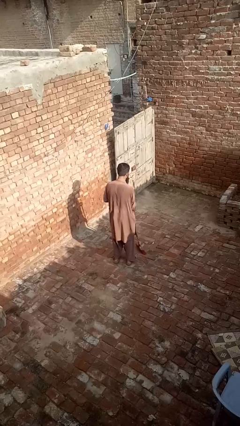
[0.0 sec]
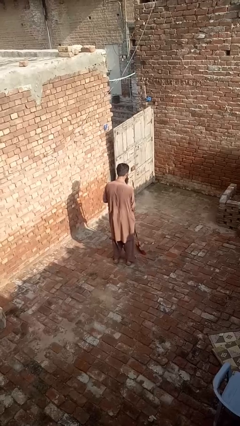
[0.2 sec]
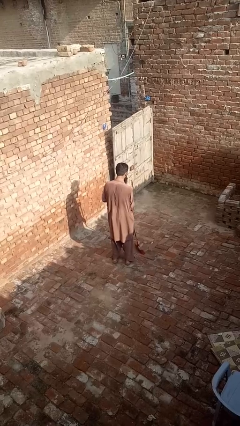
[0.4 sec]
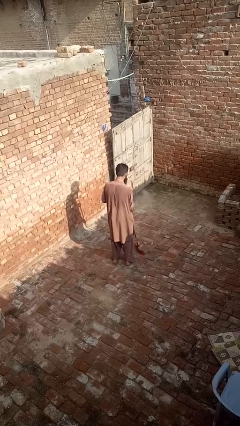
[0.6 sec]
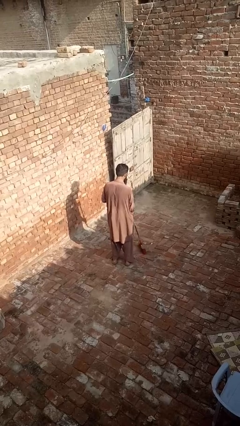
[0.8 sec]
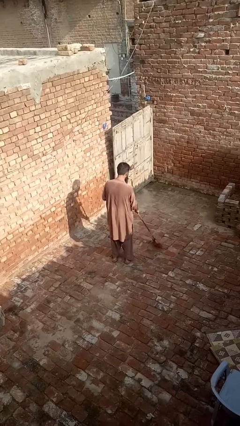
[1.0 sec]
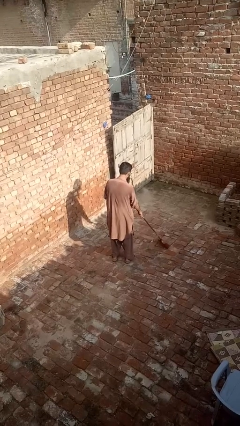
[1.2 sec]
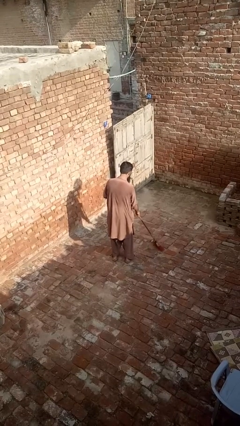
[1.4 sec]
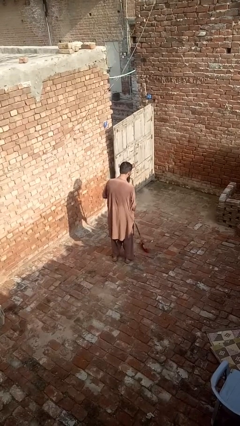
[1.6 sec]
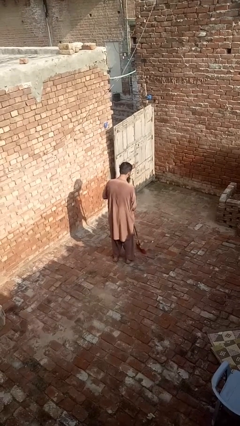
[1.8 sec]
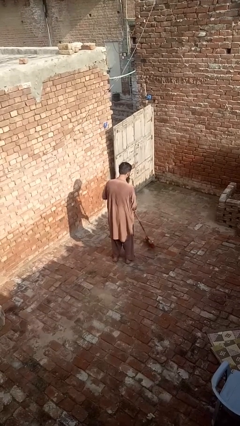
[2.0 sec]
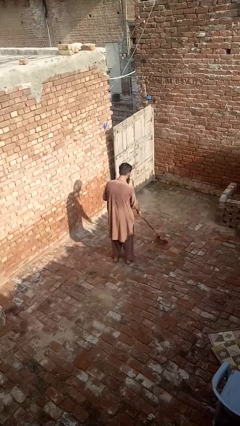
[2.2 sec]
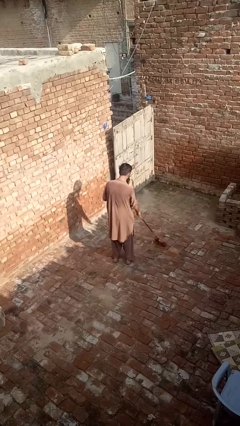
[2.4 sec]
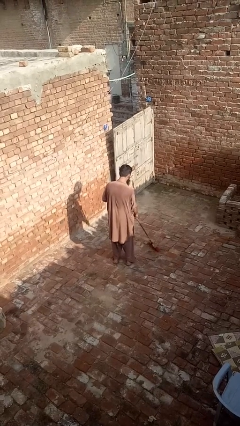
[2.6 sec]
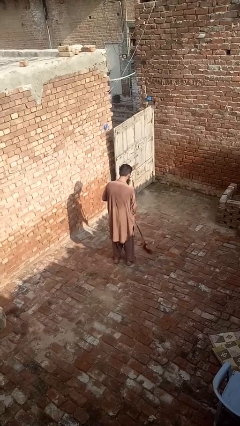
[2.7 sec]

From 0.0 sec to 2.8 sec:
person sweeps floor

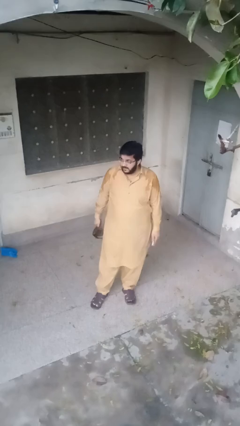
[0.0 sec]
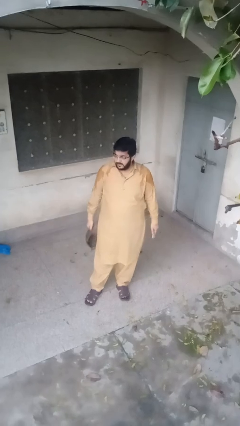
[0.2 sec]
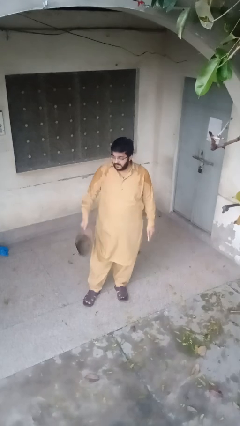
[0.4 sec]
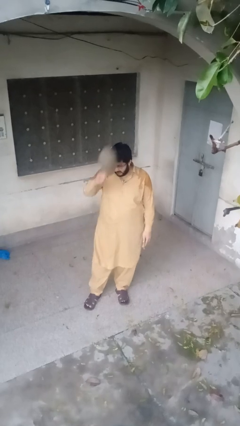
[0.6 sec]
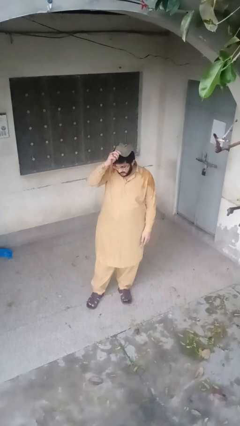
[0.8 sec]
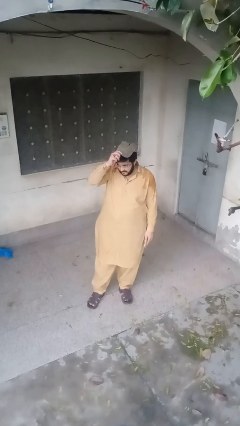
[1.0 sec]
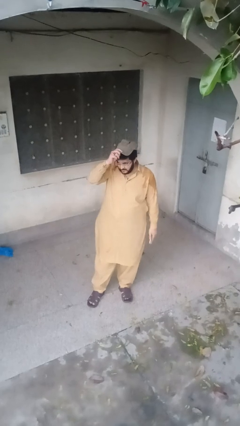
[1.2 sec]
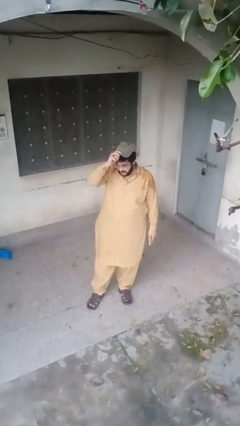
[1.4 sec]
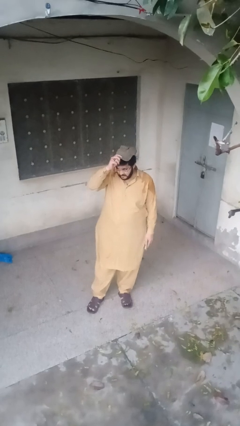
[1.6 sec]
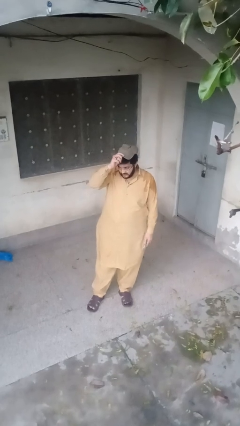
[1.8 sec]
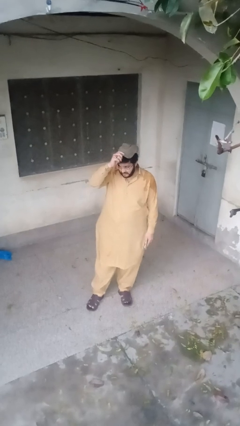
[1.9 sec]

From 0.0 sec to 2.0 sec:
person puts on hat

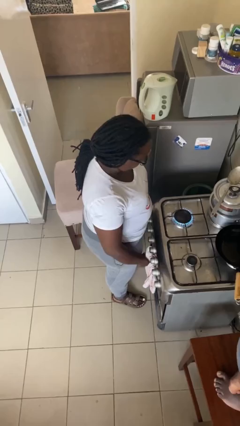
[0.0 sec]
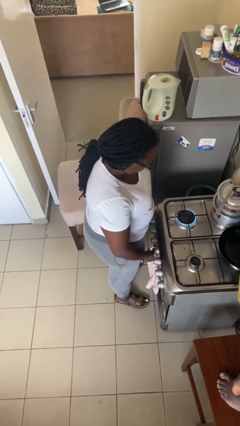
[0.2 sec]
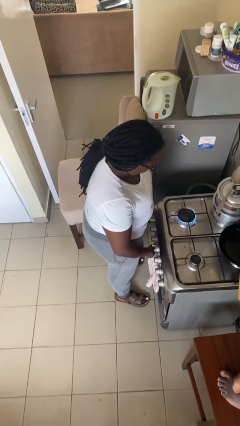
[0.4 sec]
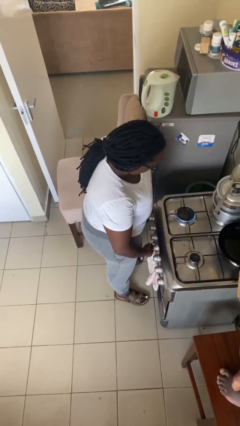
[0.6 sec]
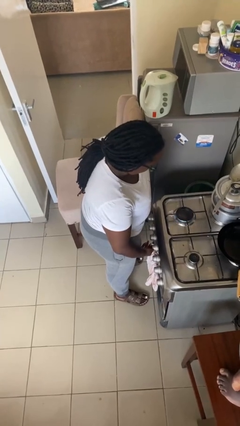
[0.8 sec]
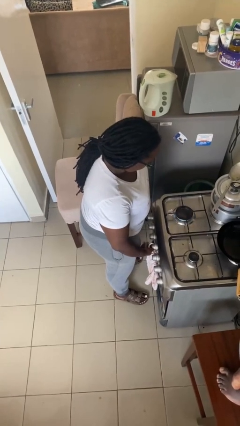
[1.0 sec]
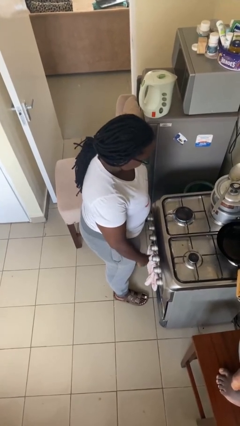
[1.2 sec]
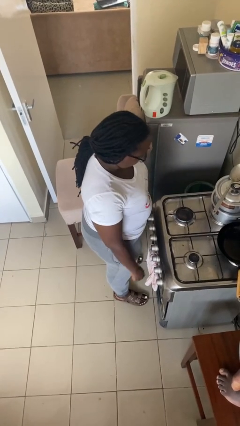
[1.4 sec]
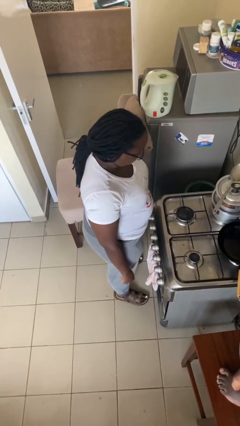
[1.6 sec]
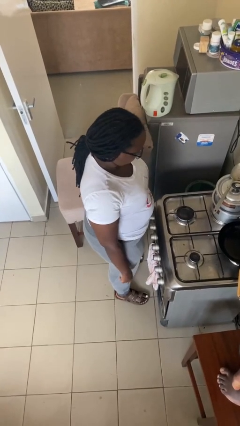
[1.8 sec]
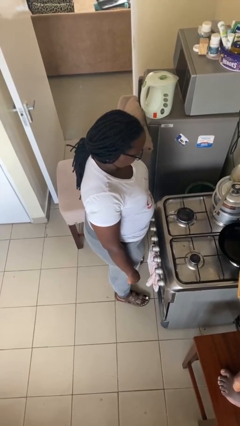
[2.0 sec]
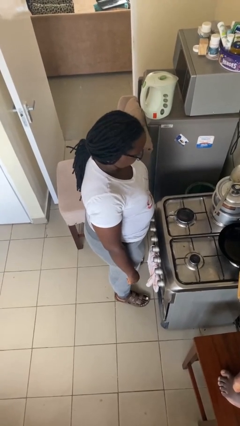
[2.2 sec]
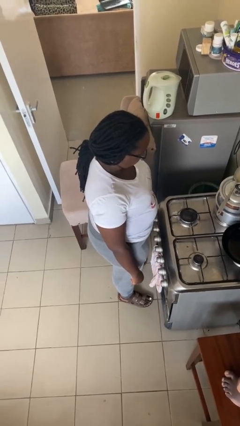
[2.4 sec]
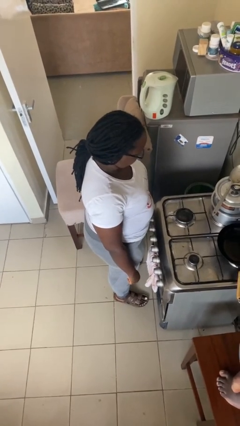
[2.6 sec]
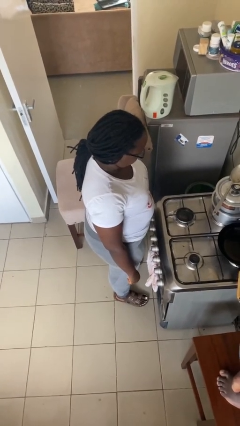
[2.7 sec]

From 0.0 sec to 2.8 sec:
person turns off stovetop

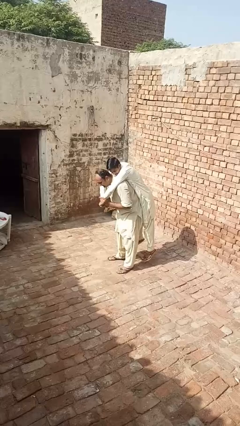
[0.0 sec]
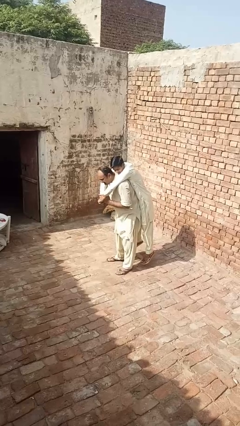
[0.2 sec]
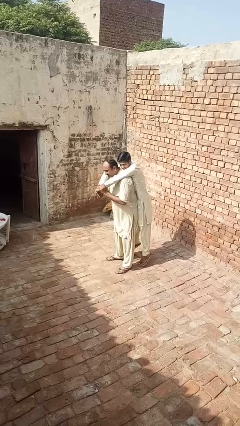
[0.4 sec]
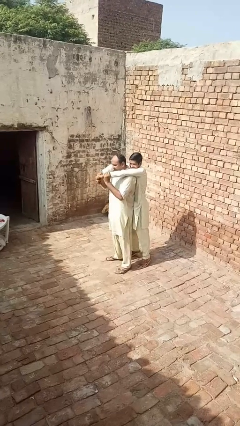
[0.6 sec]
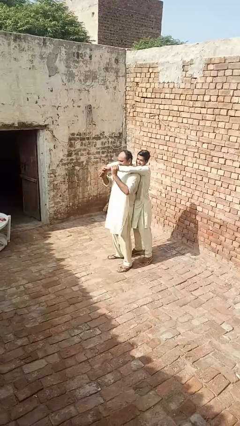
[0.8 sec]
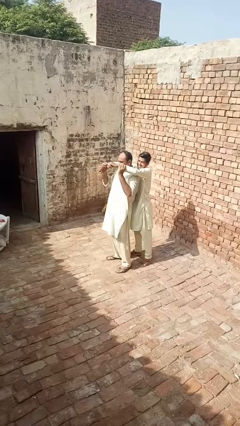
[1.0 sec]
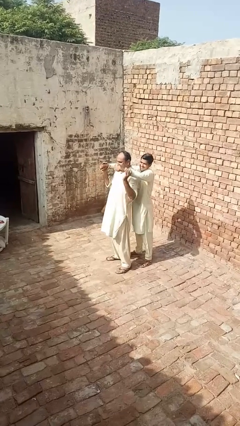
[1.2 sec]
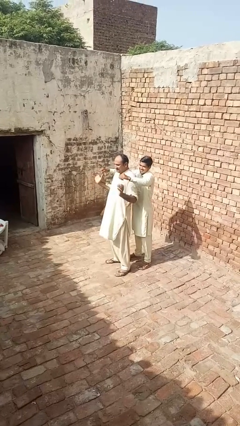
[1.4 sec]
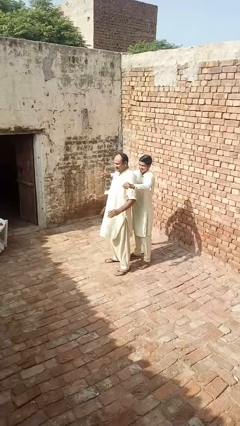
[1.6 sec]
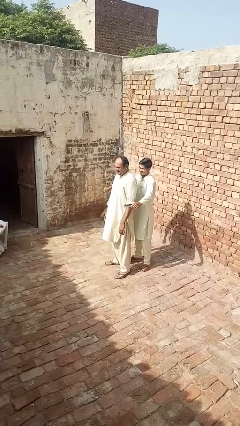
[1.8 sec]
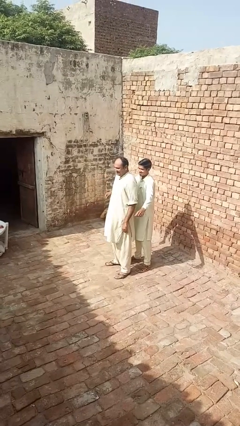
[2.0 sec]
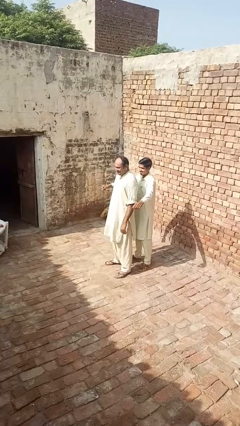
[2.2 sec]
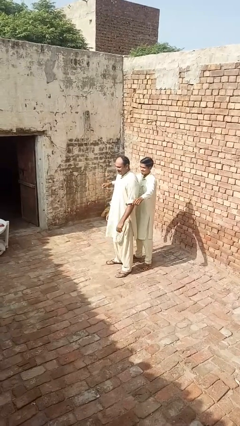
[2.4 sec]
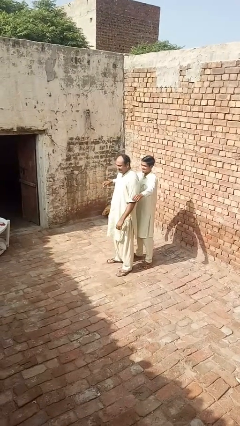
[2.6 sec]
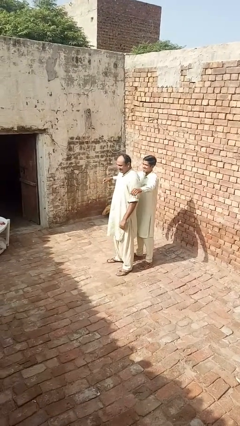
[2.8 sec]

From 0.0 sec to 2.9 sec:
person puts down person

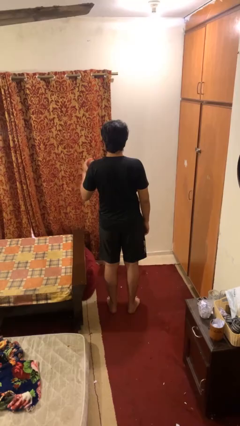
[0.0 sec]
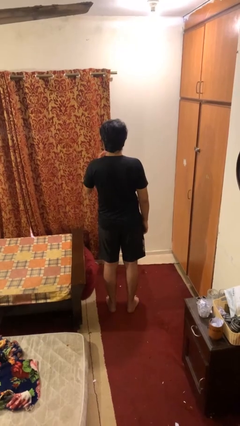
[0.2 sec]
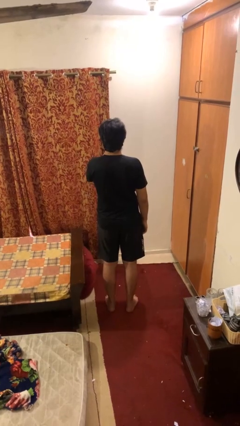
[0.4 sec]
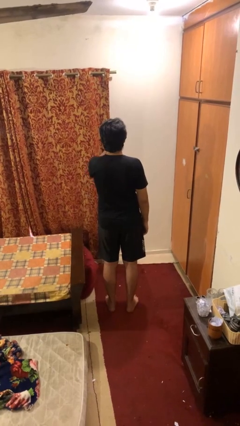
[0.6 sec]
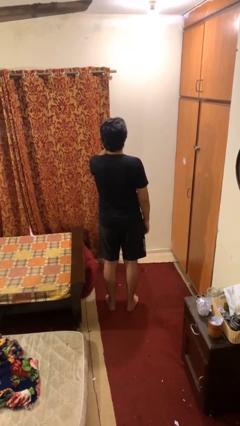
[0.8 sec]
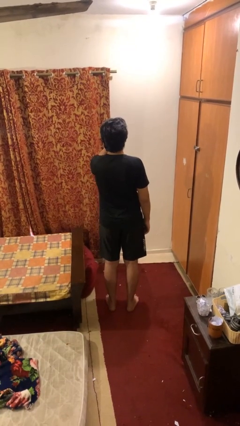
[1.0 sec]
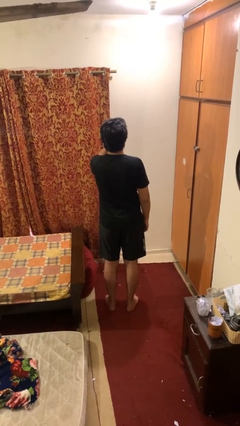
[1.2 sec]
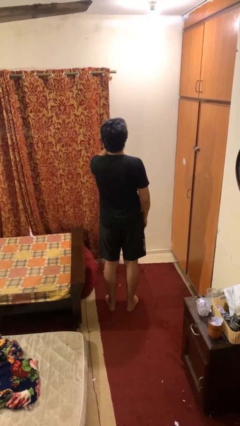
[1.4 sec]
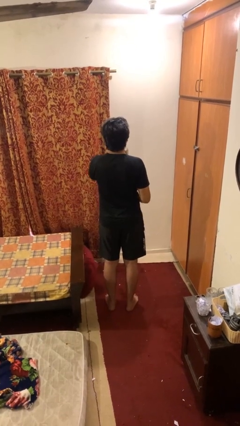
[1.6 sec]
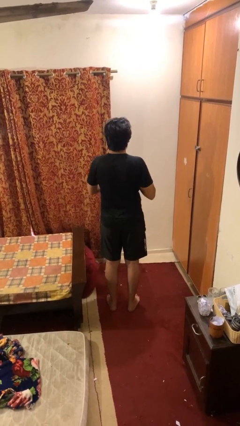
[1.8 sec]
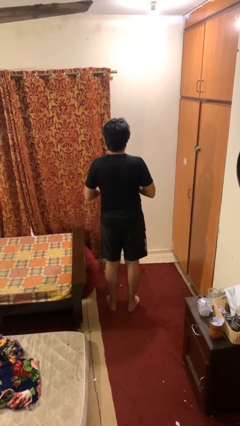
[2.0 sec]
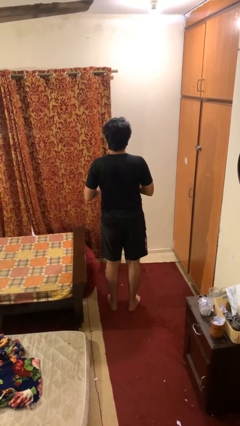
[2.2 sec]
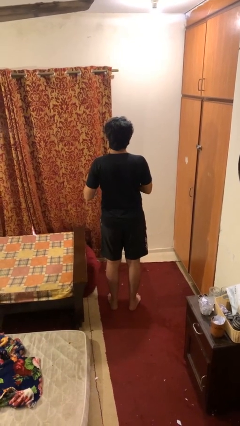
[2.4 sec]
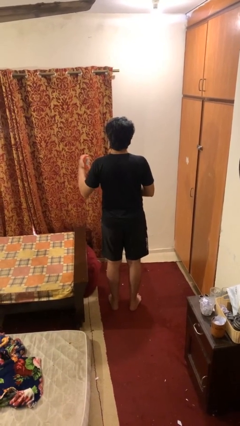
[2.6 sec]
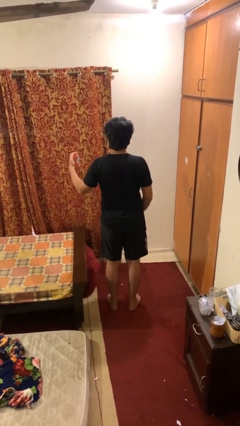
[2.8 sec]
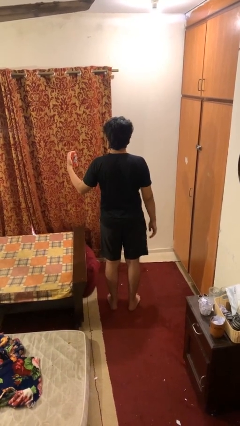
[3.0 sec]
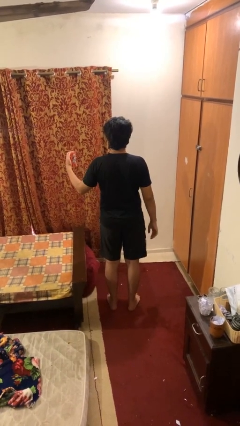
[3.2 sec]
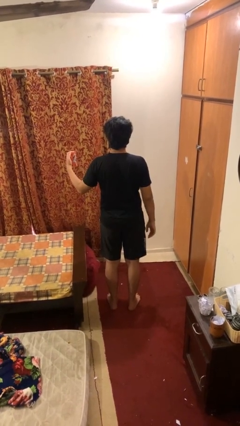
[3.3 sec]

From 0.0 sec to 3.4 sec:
person drinks from beverage can

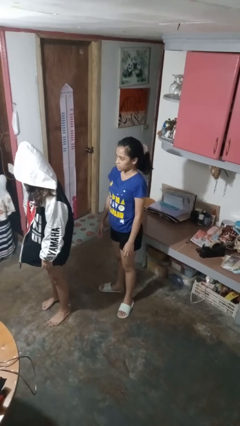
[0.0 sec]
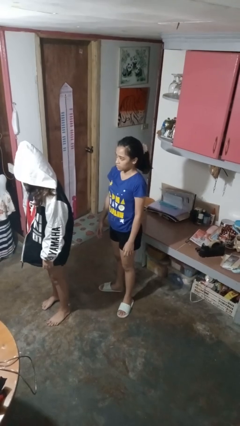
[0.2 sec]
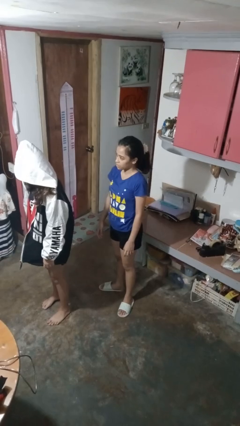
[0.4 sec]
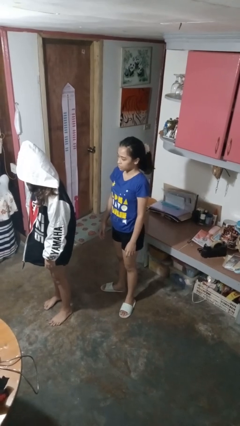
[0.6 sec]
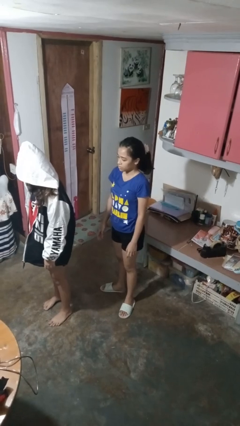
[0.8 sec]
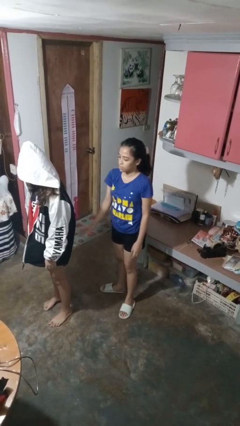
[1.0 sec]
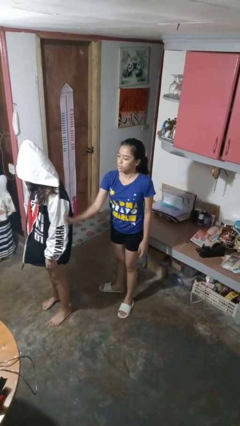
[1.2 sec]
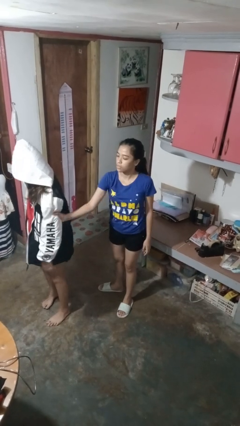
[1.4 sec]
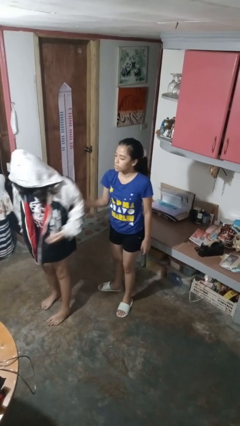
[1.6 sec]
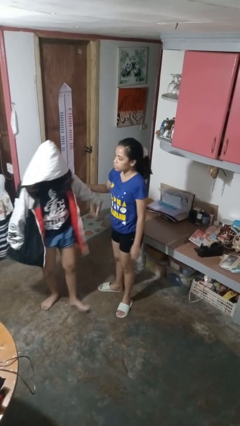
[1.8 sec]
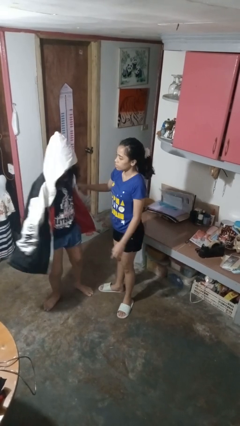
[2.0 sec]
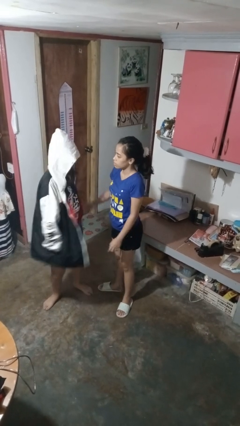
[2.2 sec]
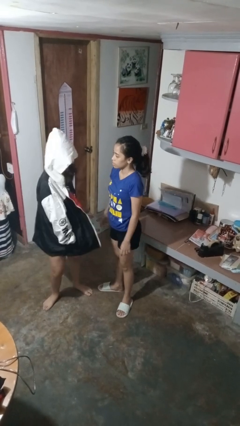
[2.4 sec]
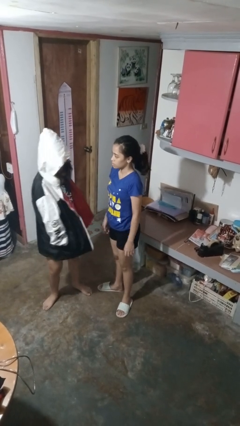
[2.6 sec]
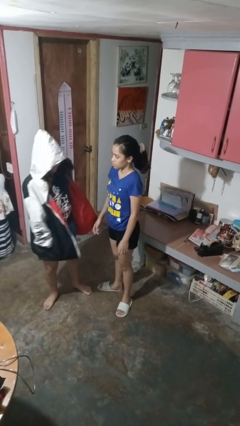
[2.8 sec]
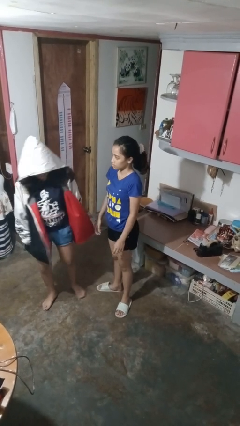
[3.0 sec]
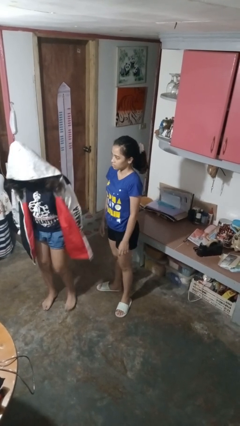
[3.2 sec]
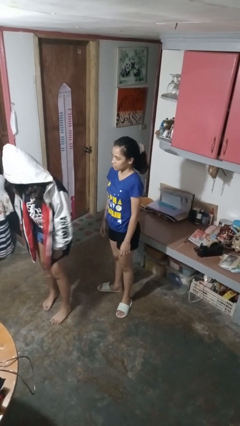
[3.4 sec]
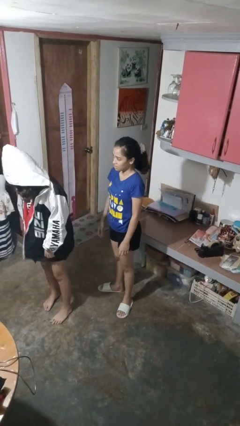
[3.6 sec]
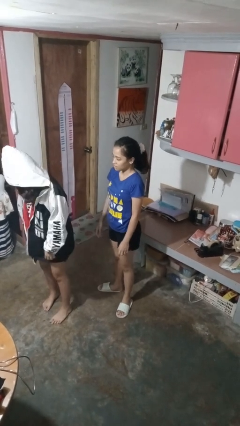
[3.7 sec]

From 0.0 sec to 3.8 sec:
person grabs person by bicep
